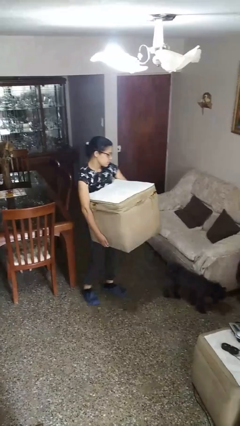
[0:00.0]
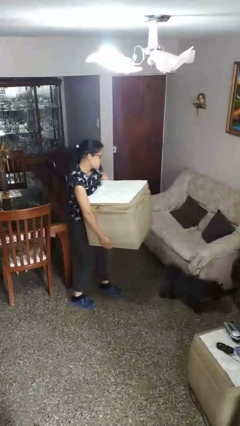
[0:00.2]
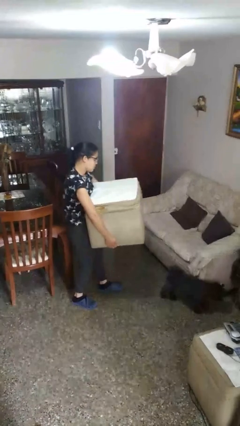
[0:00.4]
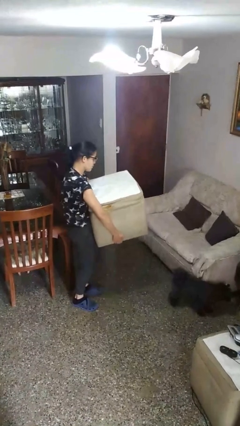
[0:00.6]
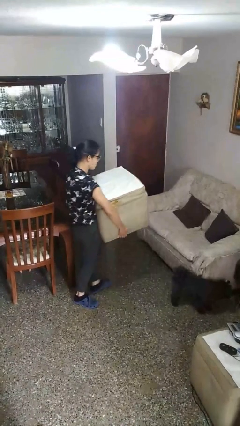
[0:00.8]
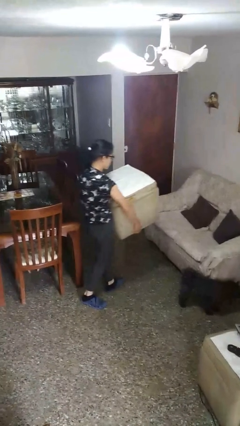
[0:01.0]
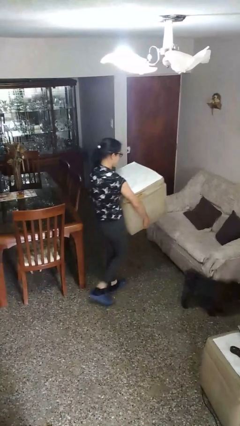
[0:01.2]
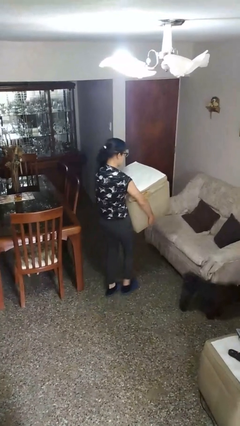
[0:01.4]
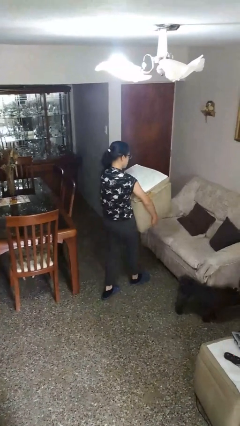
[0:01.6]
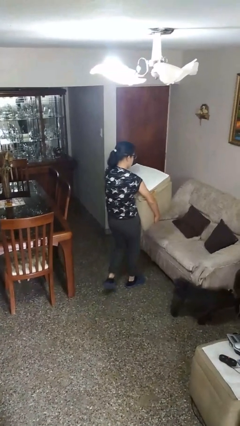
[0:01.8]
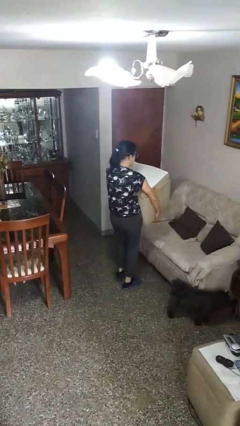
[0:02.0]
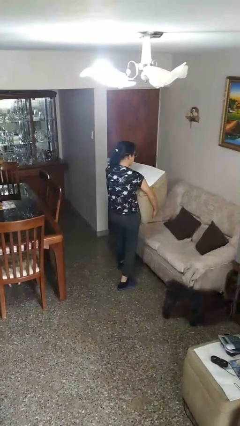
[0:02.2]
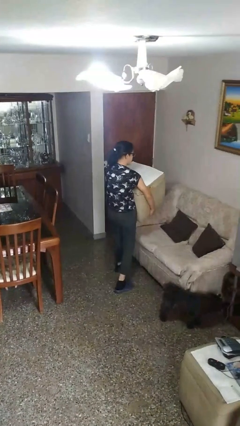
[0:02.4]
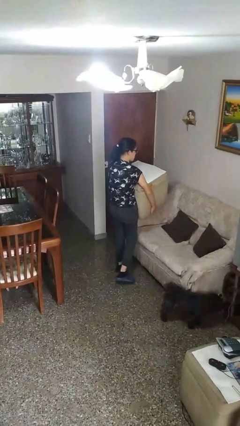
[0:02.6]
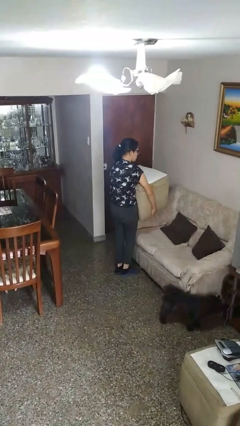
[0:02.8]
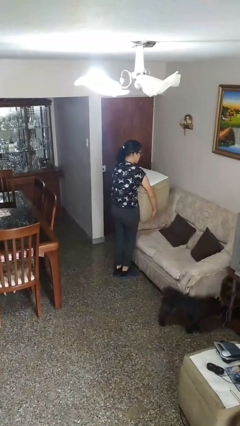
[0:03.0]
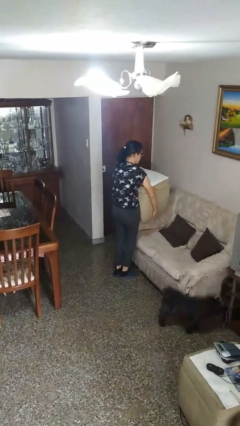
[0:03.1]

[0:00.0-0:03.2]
person carries furniture

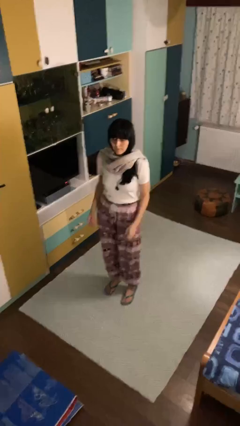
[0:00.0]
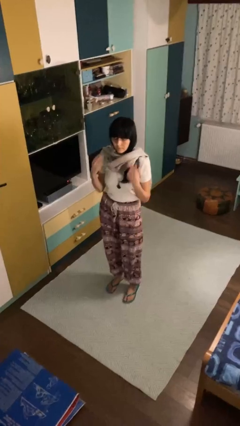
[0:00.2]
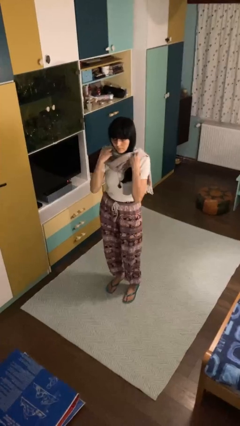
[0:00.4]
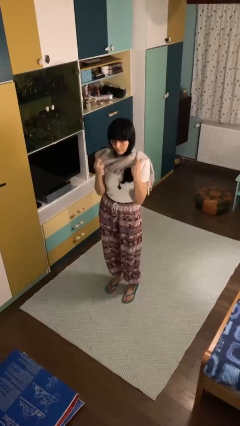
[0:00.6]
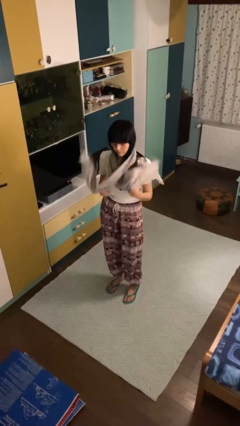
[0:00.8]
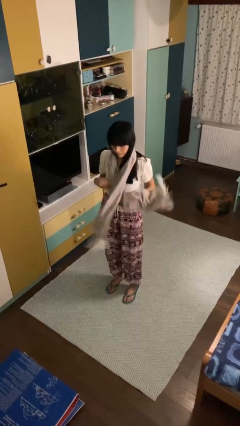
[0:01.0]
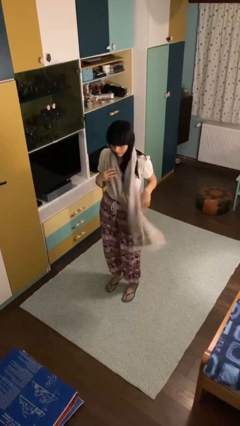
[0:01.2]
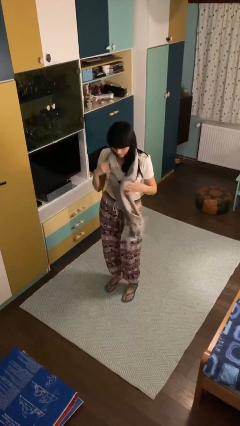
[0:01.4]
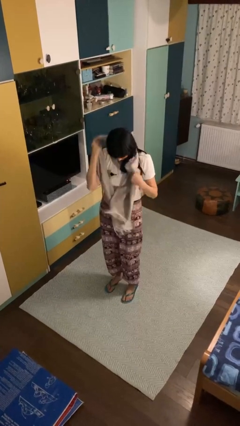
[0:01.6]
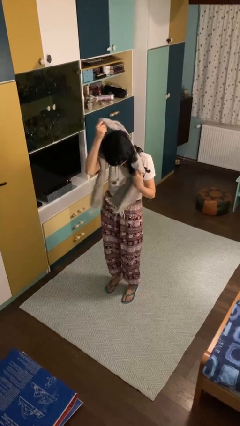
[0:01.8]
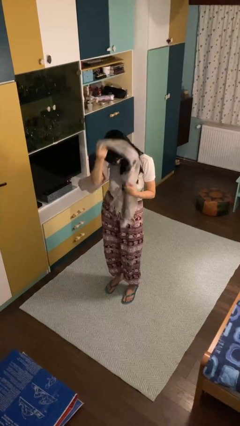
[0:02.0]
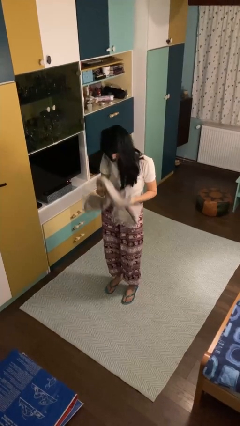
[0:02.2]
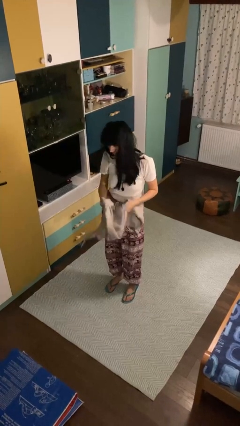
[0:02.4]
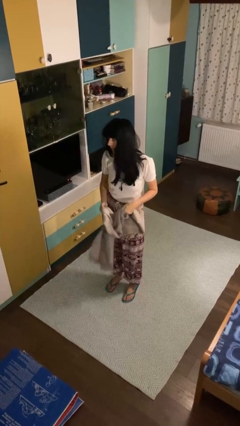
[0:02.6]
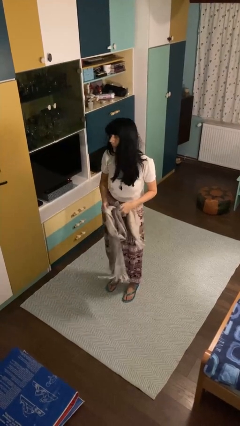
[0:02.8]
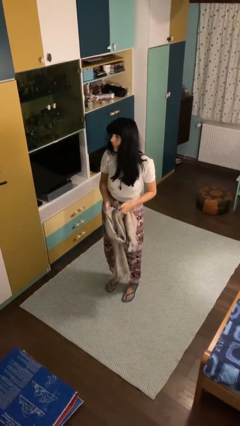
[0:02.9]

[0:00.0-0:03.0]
person takes off scarf

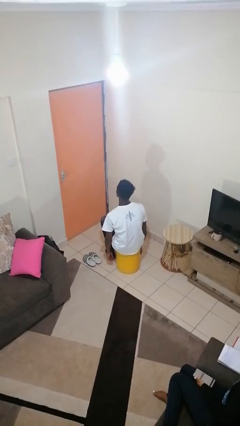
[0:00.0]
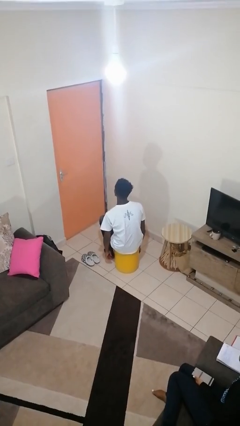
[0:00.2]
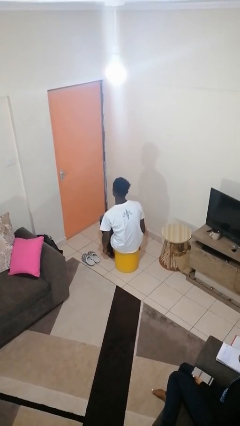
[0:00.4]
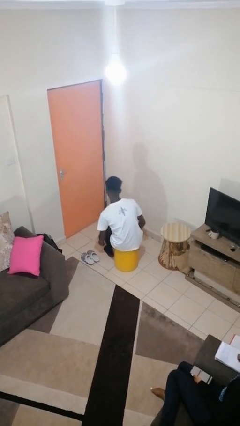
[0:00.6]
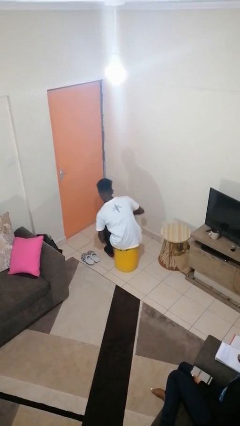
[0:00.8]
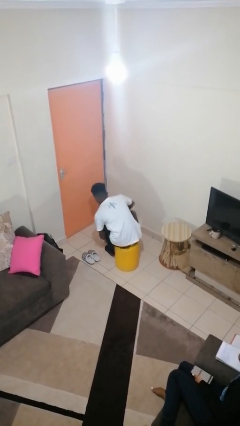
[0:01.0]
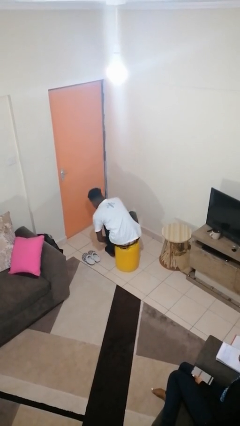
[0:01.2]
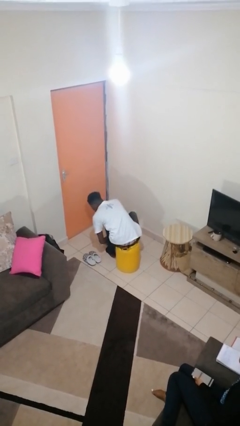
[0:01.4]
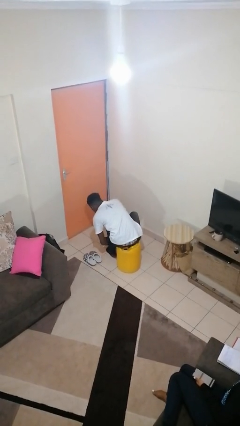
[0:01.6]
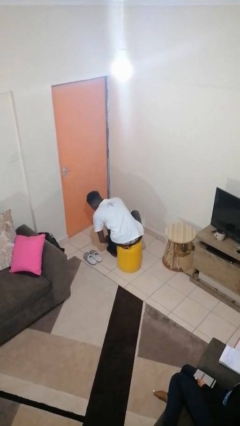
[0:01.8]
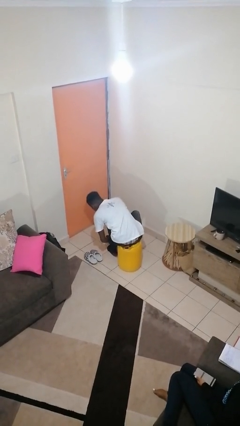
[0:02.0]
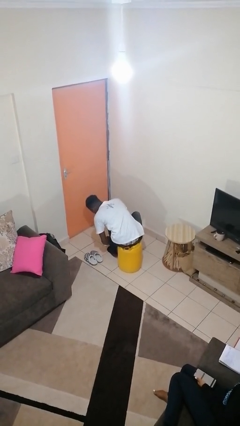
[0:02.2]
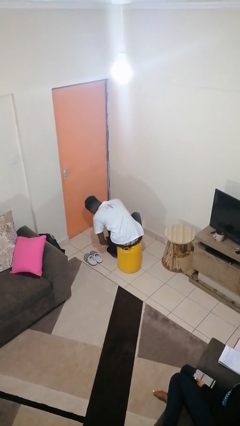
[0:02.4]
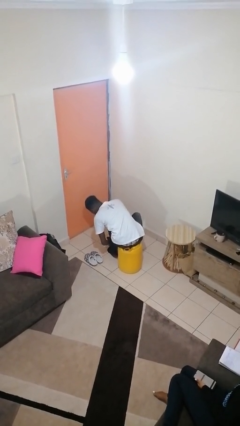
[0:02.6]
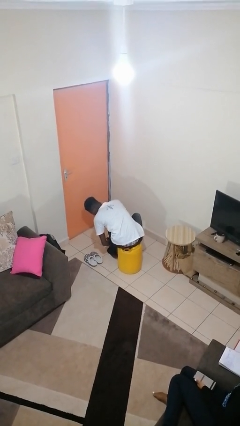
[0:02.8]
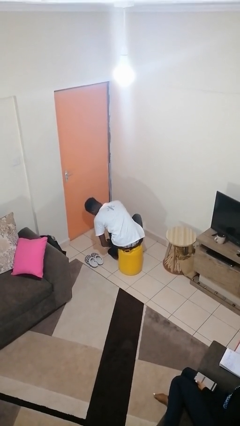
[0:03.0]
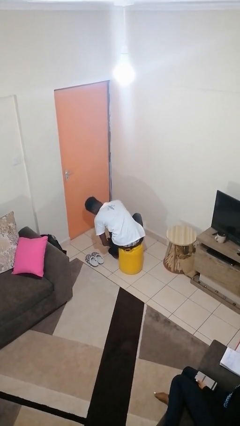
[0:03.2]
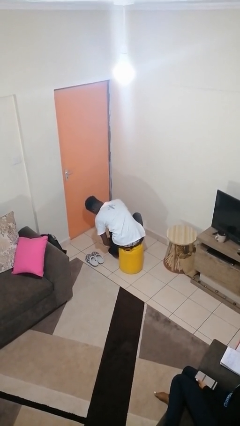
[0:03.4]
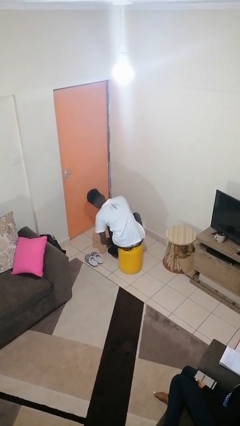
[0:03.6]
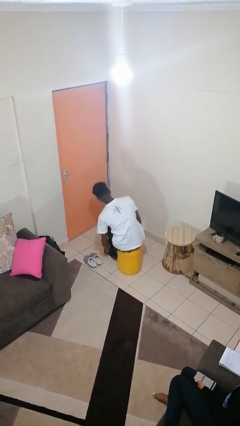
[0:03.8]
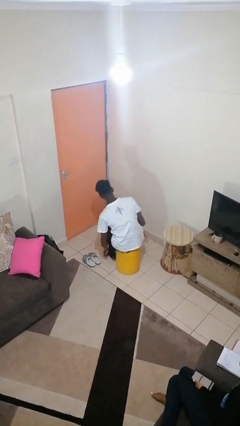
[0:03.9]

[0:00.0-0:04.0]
person rubs foot

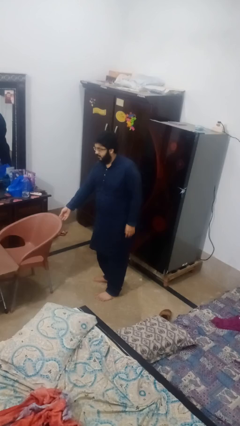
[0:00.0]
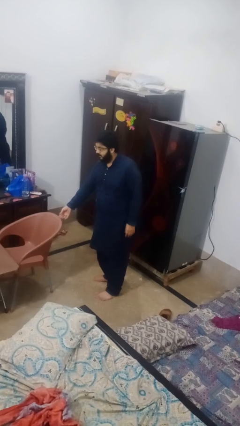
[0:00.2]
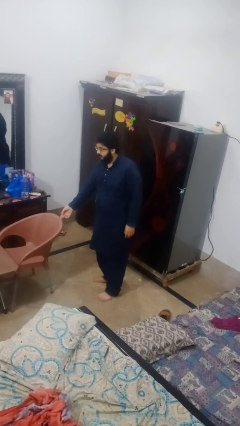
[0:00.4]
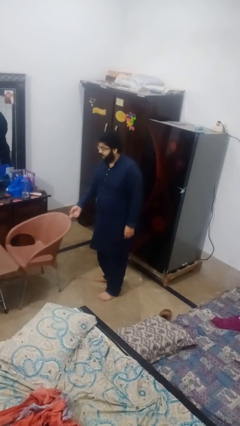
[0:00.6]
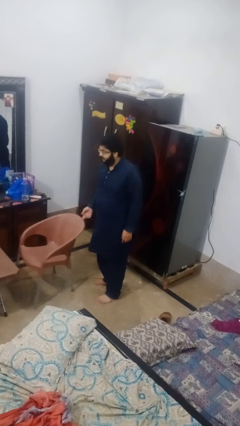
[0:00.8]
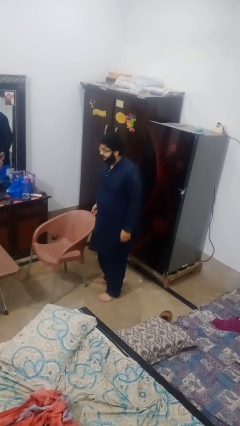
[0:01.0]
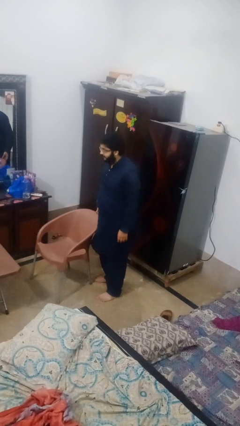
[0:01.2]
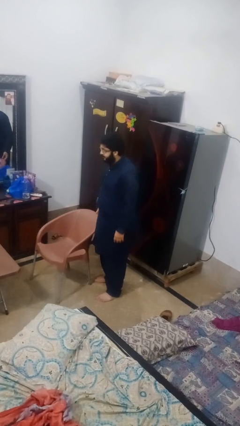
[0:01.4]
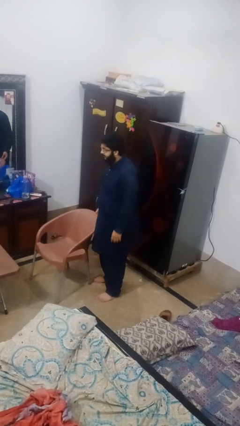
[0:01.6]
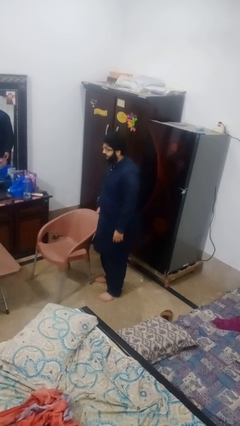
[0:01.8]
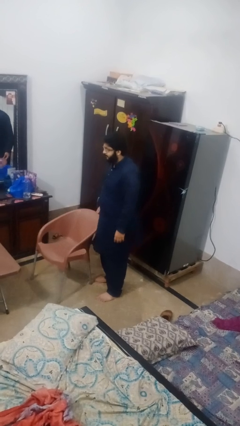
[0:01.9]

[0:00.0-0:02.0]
person pulls out chair

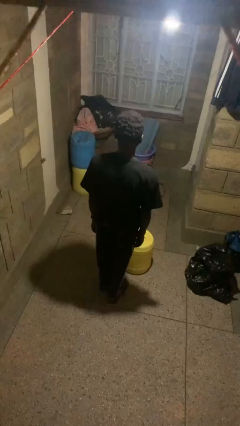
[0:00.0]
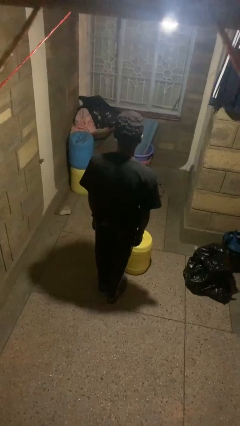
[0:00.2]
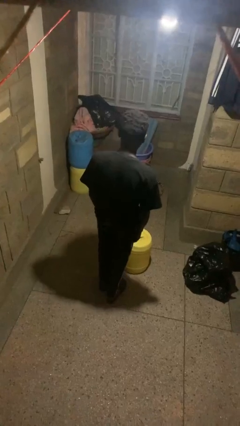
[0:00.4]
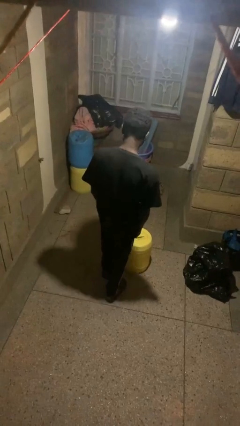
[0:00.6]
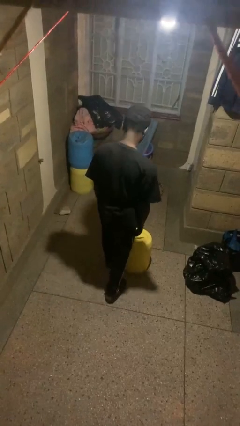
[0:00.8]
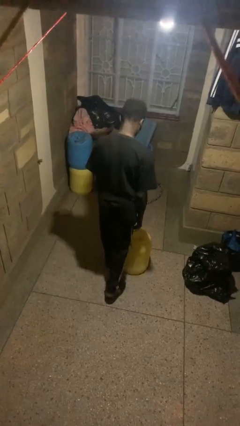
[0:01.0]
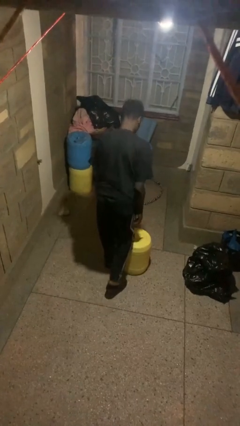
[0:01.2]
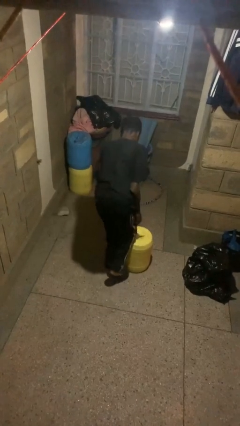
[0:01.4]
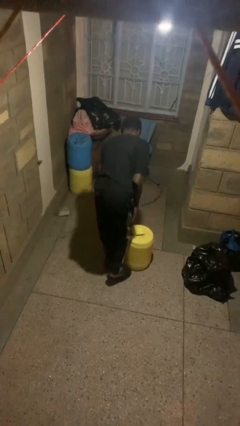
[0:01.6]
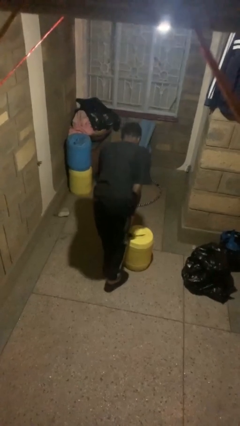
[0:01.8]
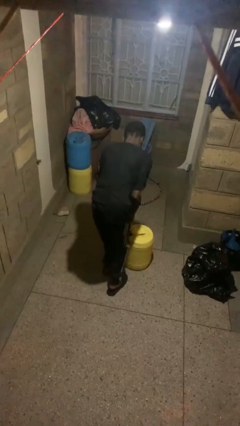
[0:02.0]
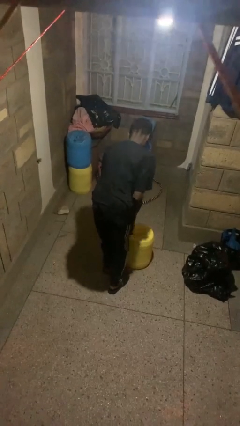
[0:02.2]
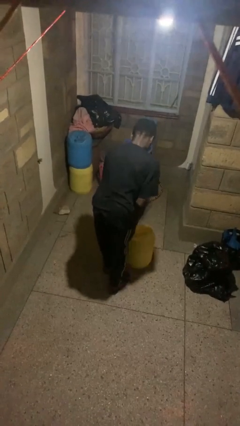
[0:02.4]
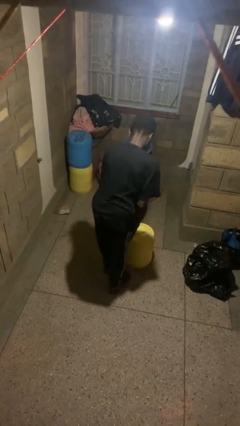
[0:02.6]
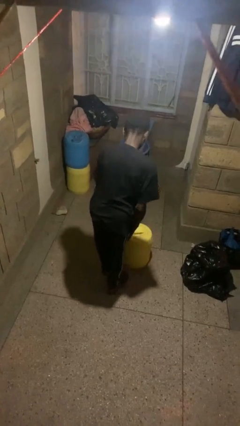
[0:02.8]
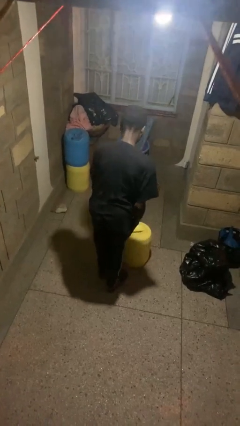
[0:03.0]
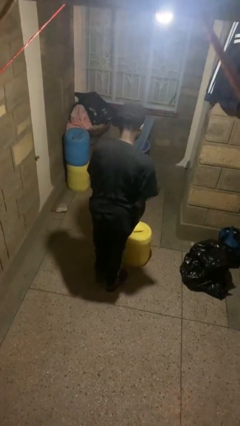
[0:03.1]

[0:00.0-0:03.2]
person stubs toe

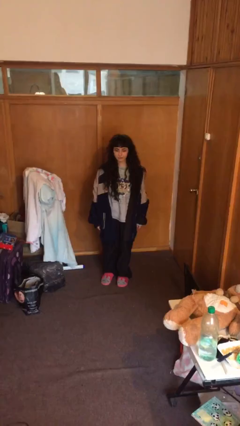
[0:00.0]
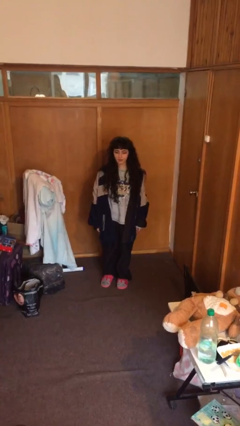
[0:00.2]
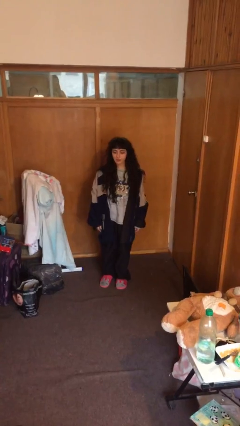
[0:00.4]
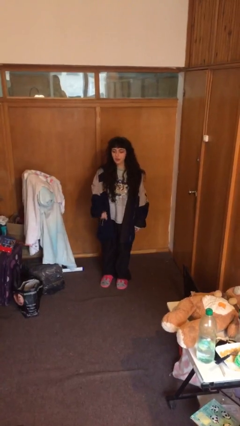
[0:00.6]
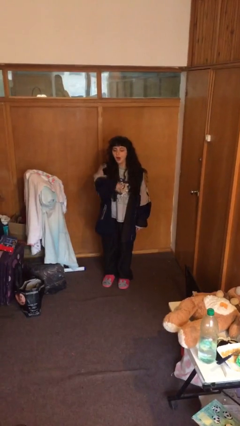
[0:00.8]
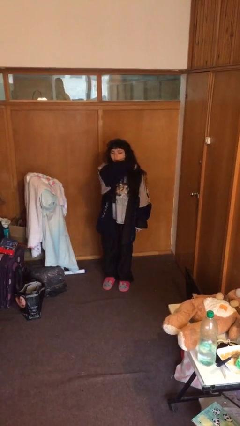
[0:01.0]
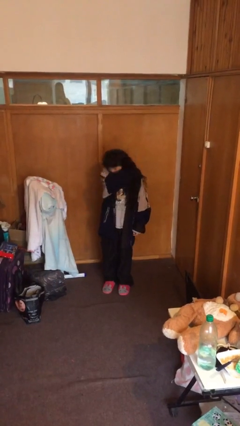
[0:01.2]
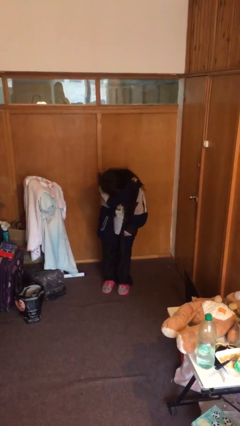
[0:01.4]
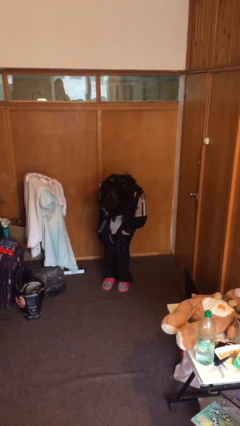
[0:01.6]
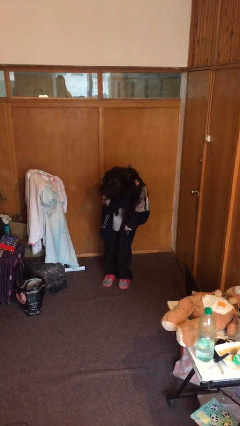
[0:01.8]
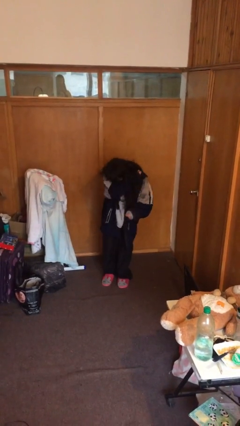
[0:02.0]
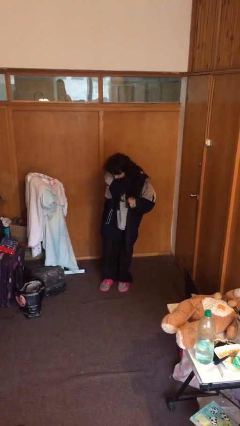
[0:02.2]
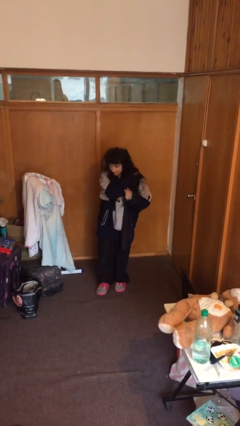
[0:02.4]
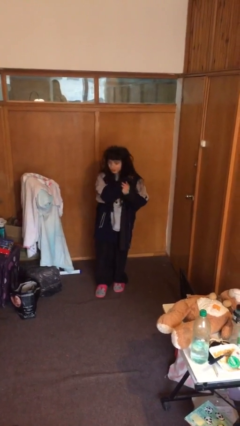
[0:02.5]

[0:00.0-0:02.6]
person sneezes into arm
